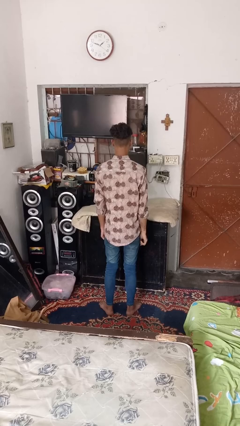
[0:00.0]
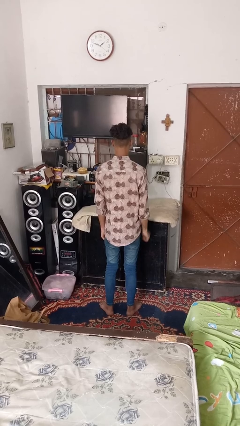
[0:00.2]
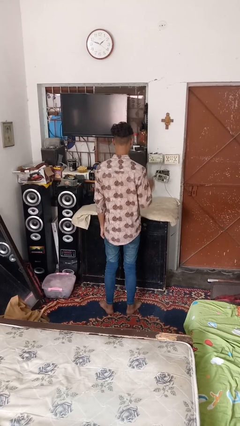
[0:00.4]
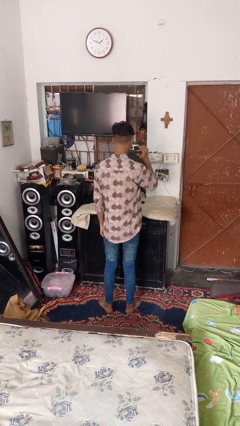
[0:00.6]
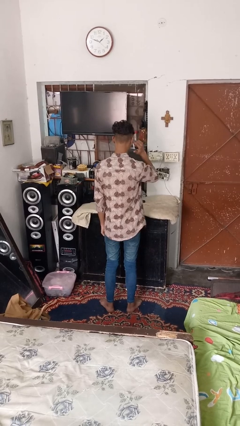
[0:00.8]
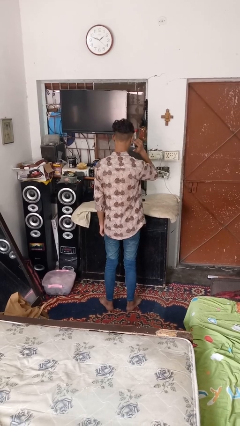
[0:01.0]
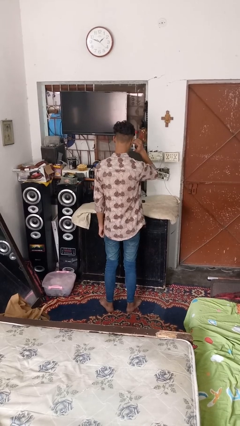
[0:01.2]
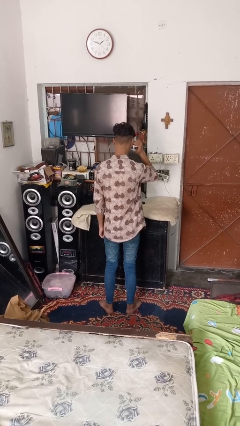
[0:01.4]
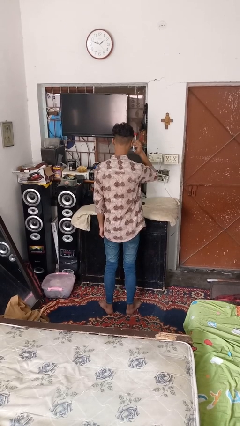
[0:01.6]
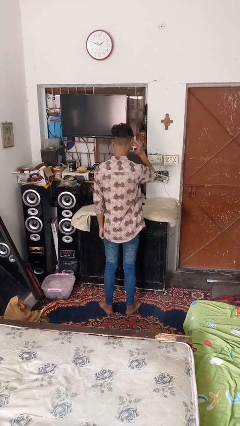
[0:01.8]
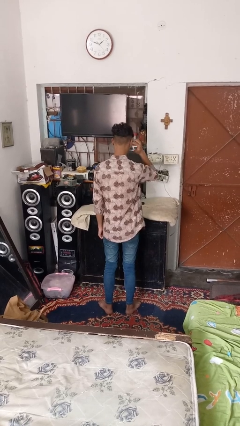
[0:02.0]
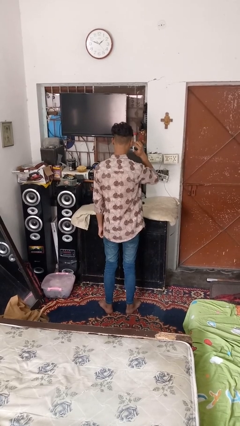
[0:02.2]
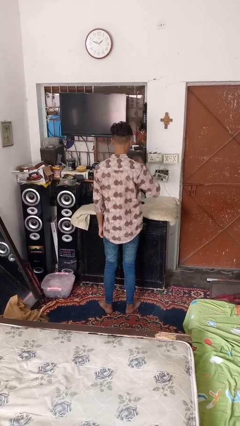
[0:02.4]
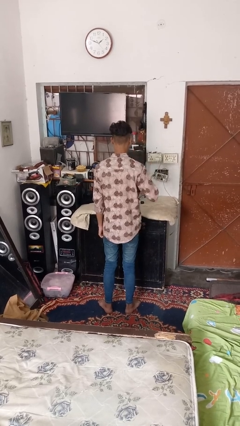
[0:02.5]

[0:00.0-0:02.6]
person puts fingers in ear

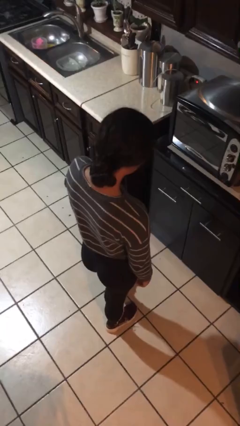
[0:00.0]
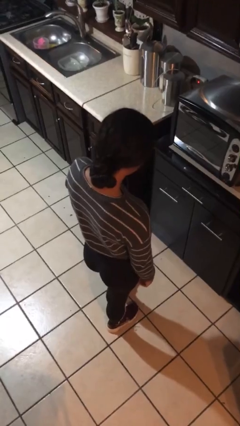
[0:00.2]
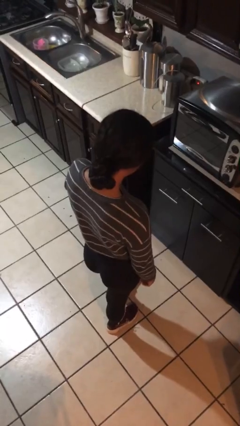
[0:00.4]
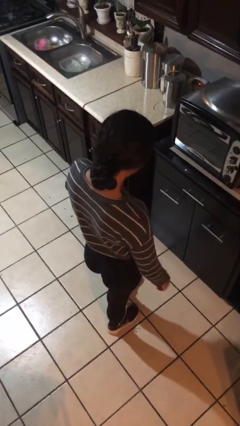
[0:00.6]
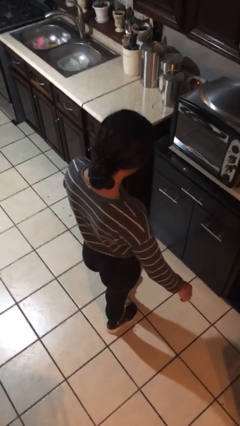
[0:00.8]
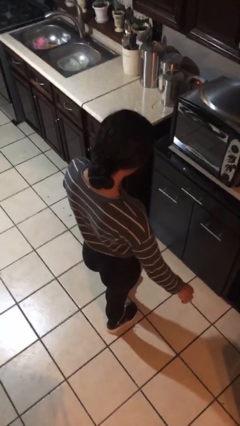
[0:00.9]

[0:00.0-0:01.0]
person opens cabinet

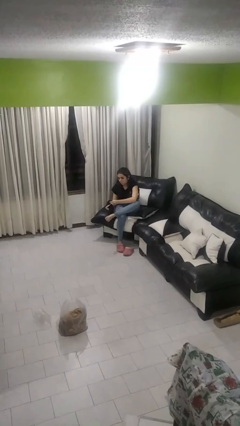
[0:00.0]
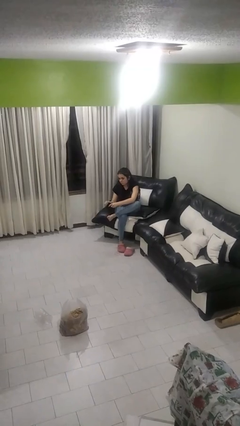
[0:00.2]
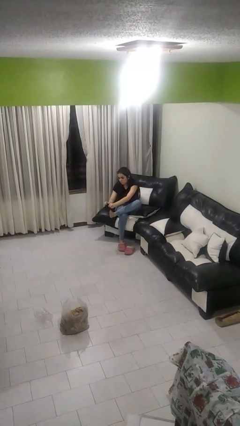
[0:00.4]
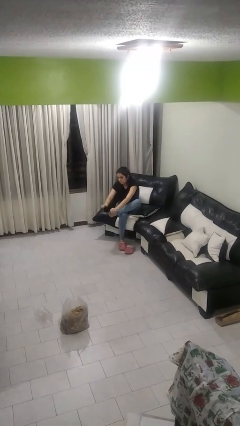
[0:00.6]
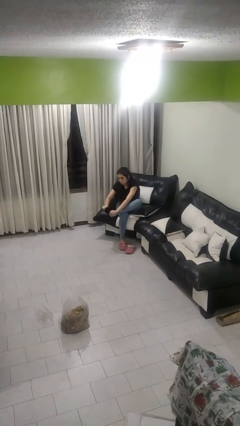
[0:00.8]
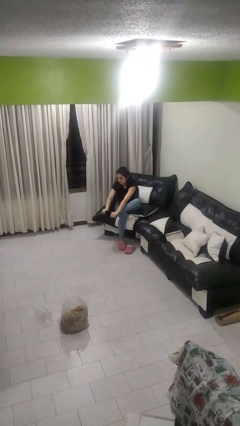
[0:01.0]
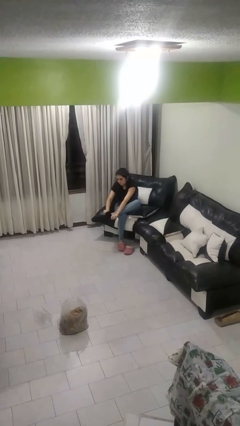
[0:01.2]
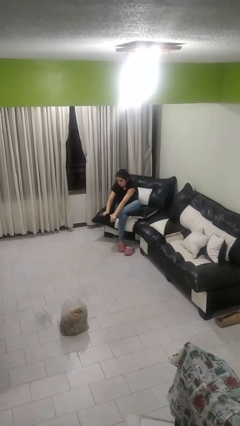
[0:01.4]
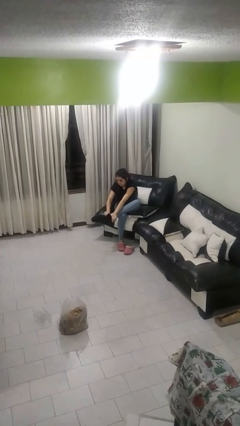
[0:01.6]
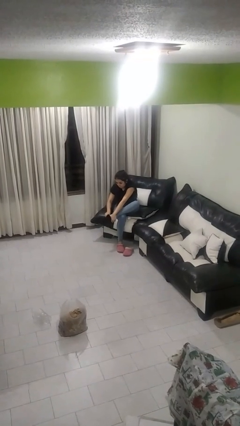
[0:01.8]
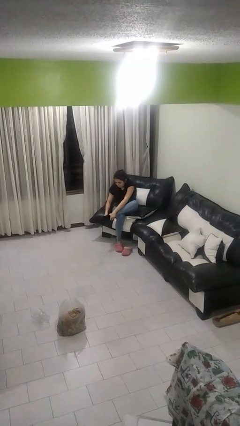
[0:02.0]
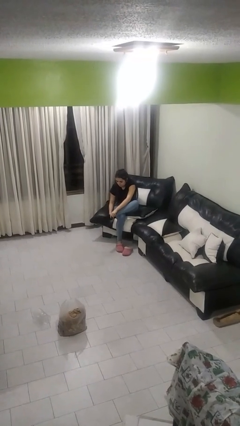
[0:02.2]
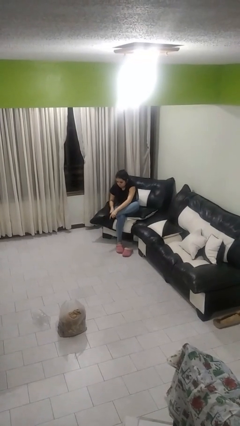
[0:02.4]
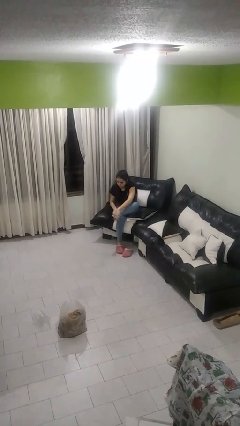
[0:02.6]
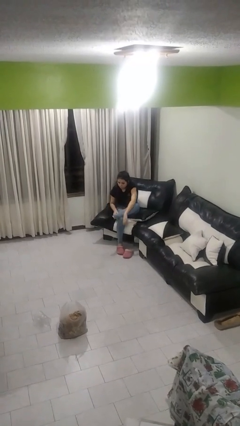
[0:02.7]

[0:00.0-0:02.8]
person puts on socks

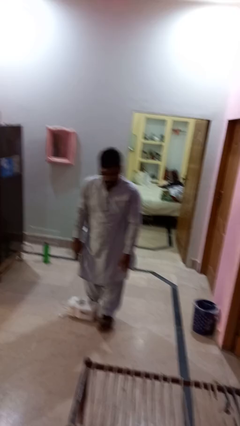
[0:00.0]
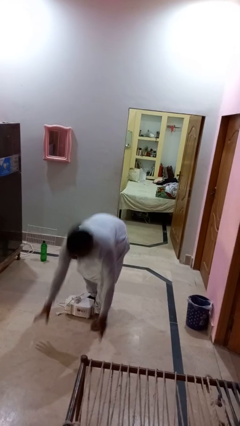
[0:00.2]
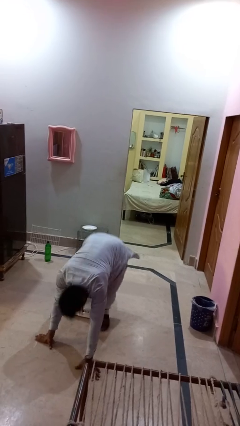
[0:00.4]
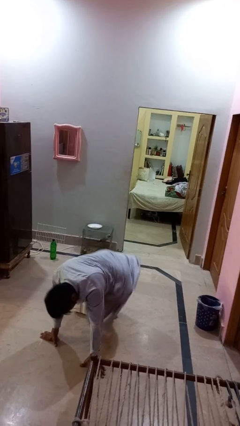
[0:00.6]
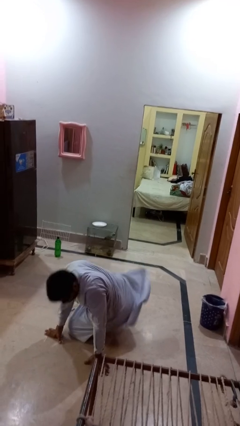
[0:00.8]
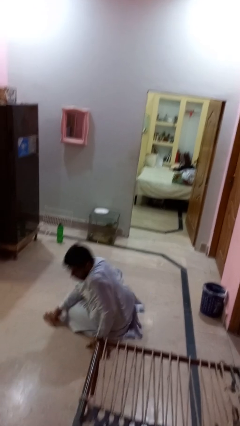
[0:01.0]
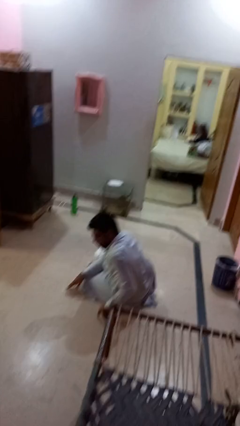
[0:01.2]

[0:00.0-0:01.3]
person trips on object on floor

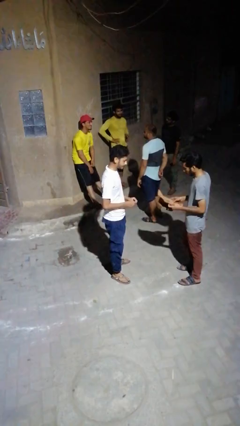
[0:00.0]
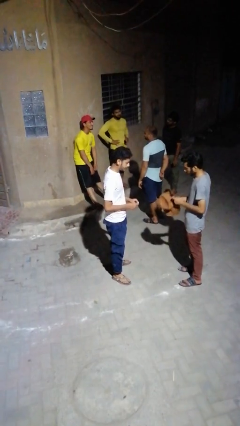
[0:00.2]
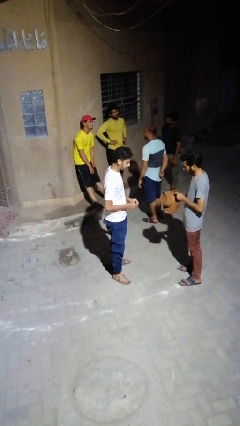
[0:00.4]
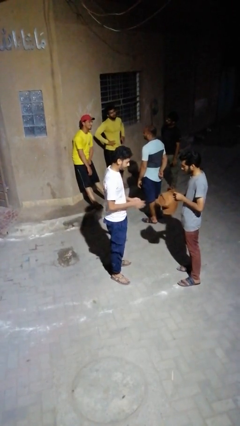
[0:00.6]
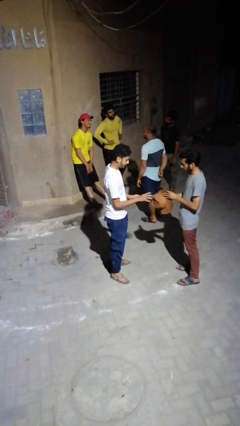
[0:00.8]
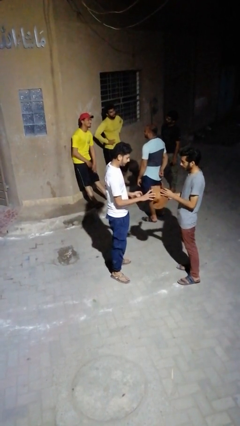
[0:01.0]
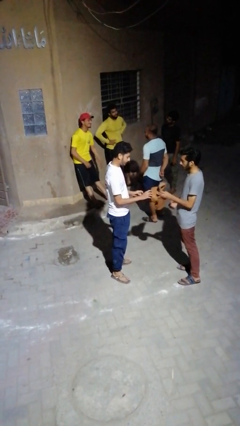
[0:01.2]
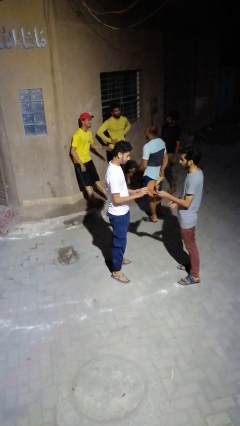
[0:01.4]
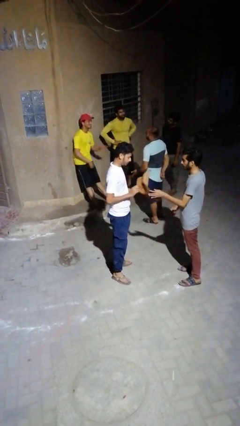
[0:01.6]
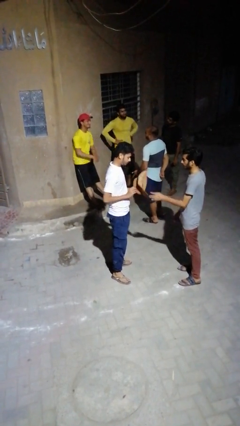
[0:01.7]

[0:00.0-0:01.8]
person transfers object to person

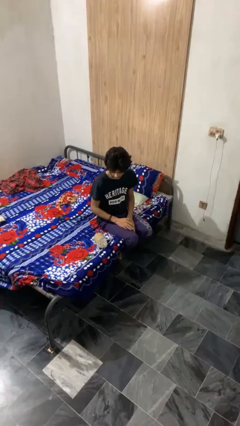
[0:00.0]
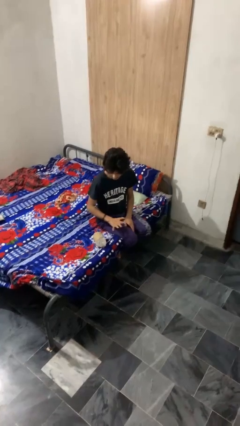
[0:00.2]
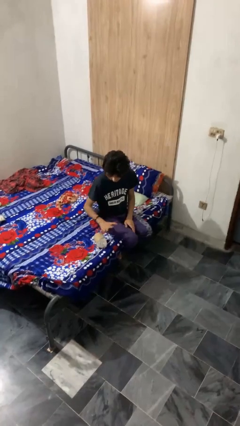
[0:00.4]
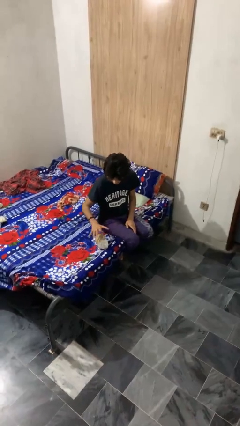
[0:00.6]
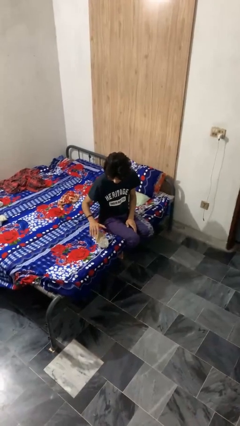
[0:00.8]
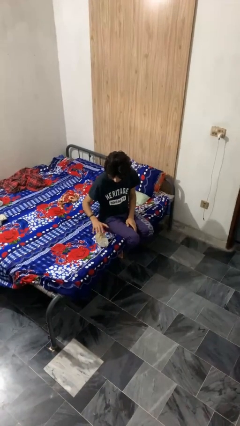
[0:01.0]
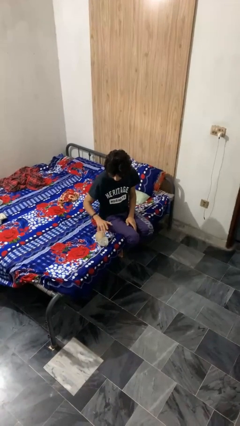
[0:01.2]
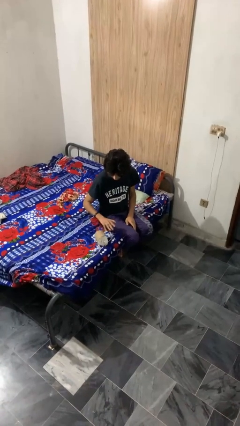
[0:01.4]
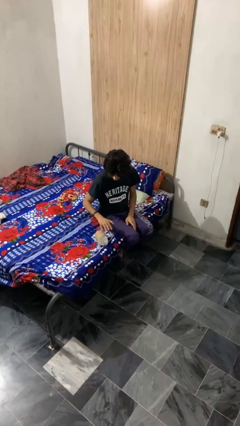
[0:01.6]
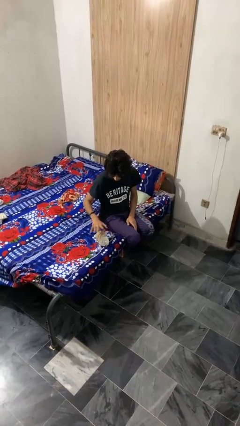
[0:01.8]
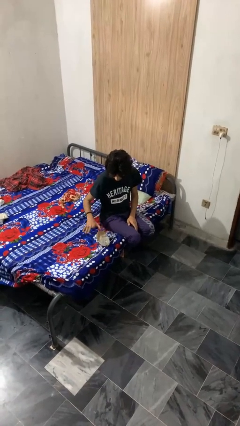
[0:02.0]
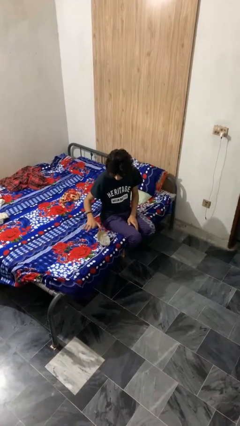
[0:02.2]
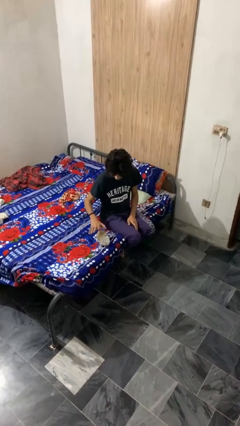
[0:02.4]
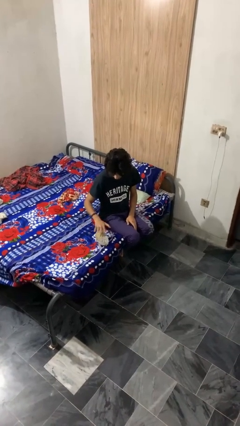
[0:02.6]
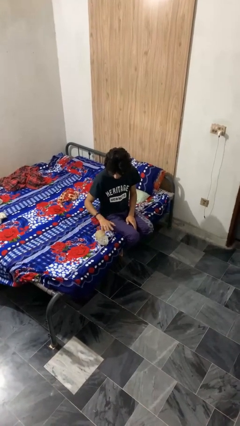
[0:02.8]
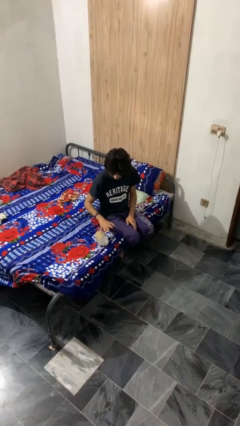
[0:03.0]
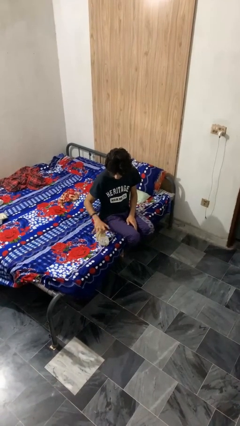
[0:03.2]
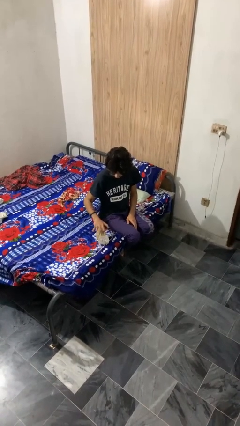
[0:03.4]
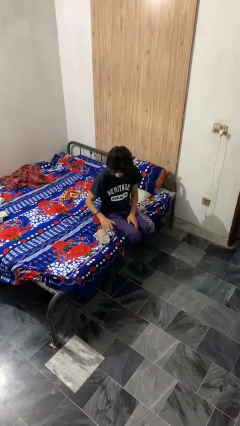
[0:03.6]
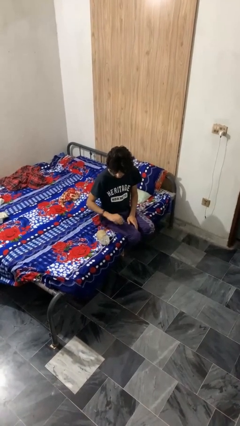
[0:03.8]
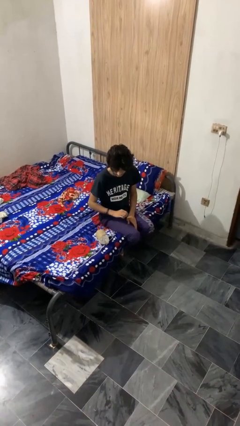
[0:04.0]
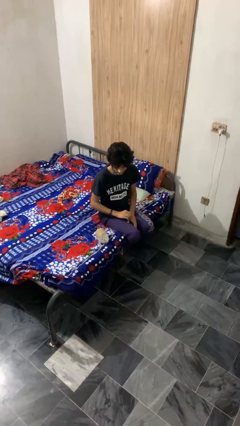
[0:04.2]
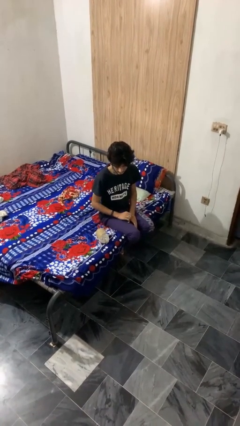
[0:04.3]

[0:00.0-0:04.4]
person waves hand over object

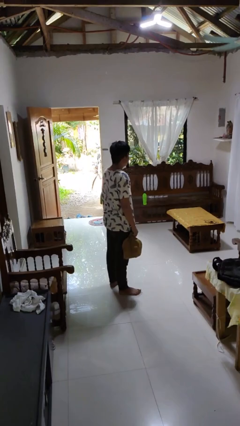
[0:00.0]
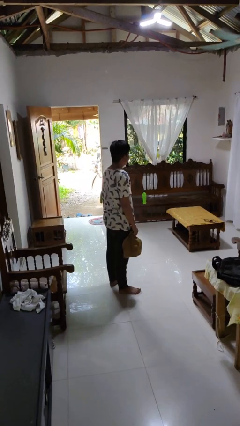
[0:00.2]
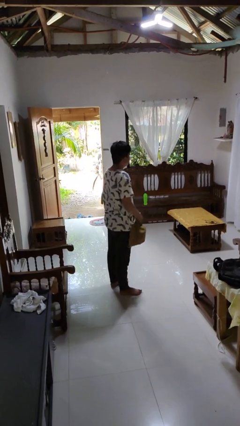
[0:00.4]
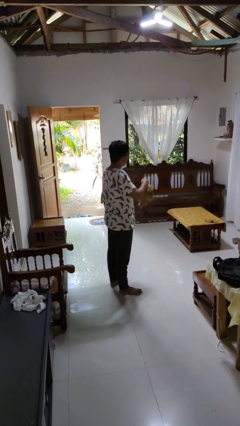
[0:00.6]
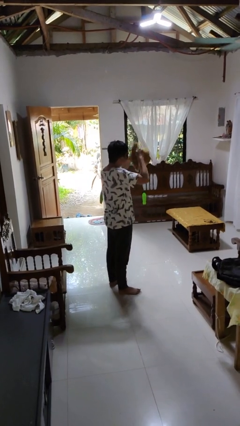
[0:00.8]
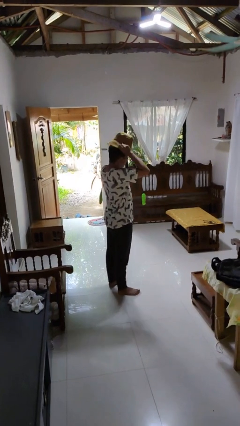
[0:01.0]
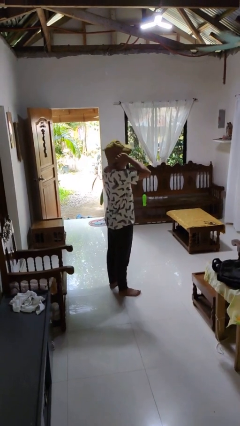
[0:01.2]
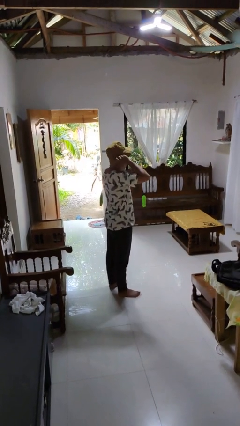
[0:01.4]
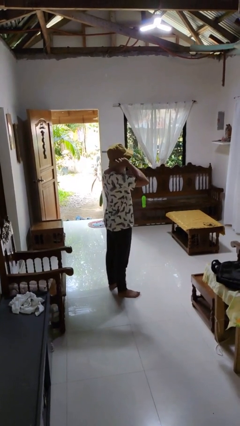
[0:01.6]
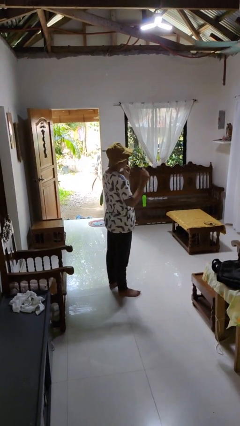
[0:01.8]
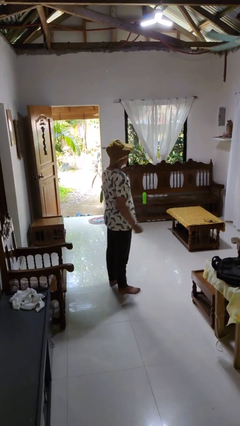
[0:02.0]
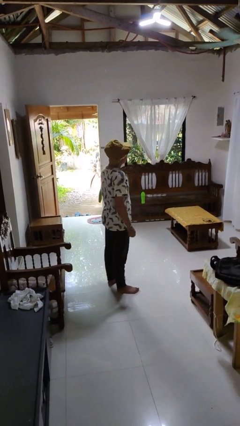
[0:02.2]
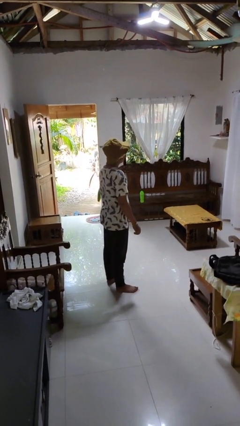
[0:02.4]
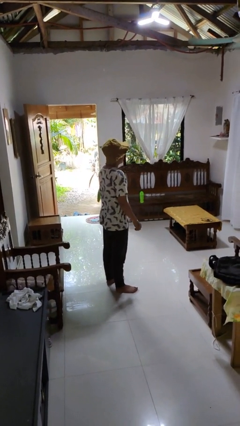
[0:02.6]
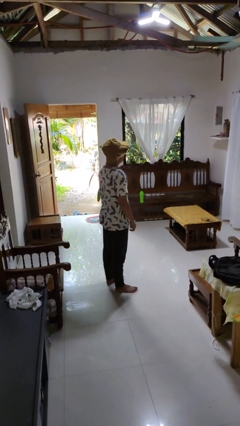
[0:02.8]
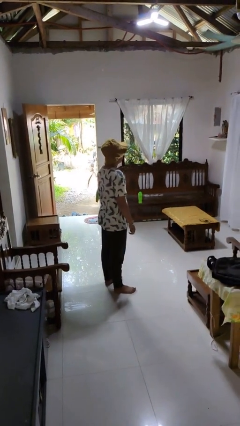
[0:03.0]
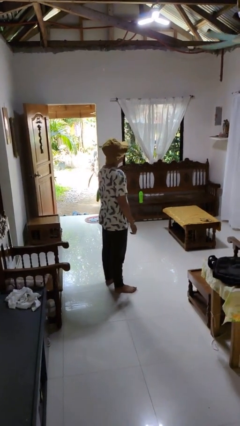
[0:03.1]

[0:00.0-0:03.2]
person puts on hat
